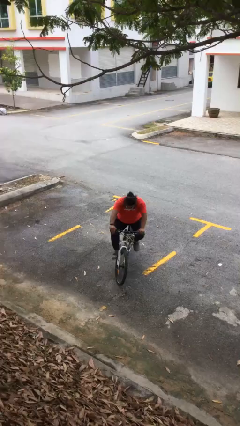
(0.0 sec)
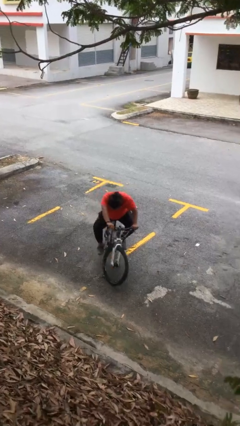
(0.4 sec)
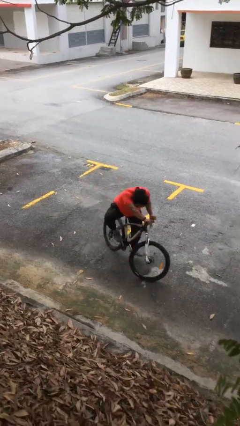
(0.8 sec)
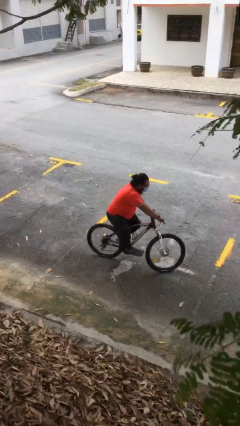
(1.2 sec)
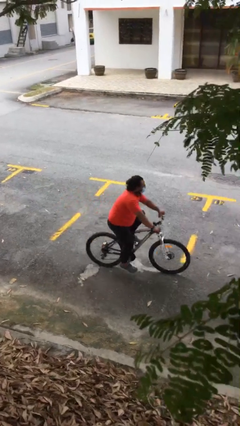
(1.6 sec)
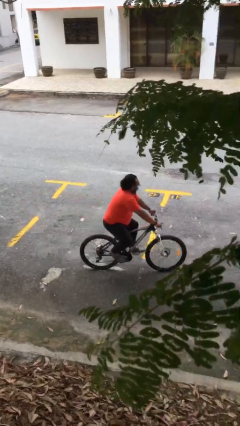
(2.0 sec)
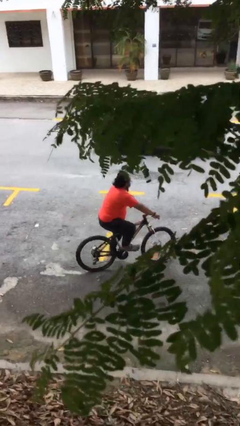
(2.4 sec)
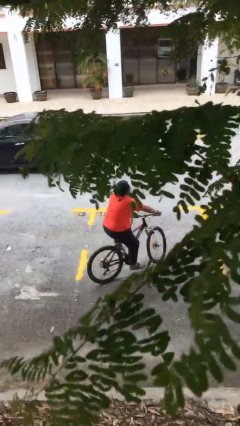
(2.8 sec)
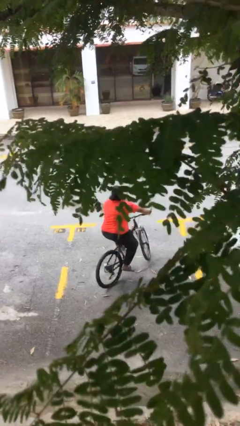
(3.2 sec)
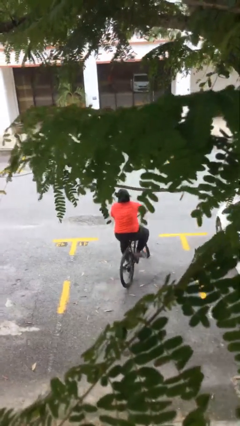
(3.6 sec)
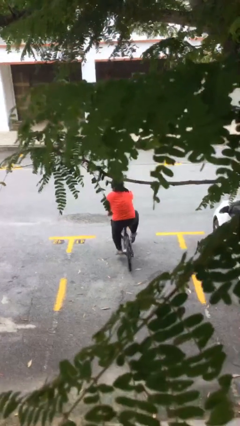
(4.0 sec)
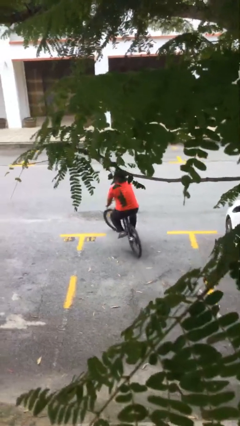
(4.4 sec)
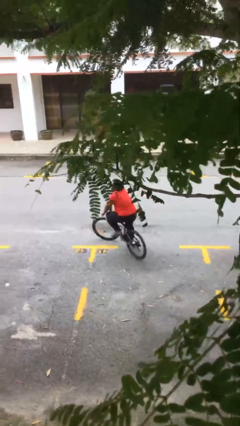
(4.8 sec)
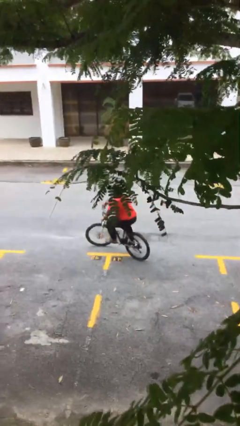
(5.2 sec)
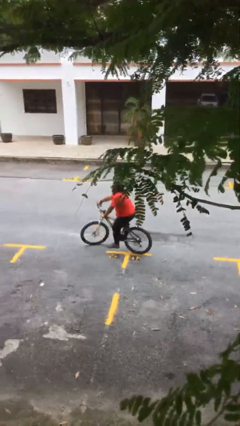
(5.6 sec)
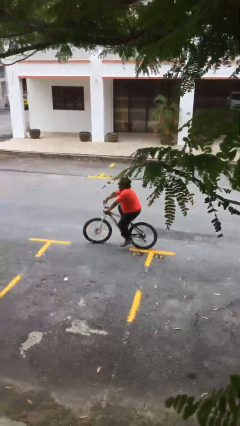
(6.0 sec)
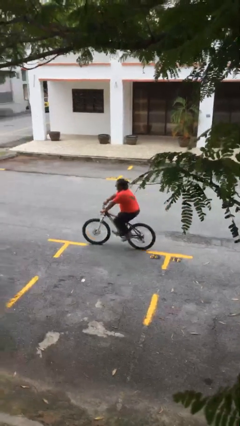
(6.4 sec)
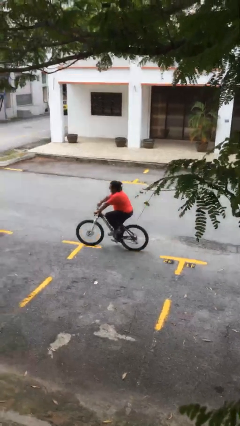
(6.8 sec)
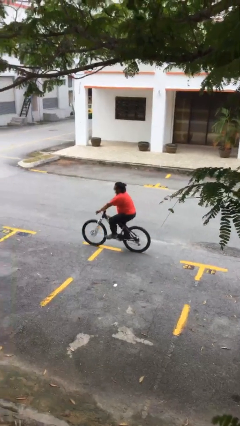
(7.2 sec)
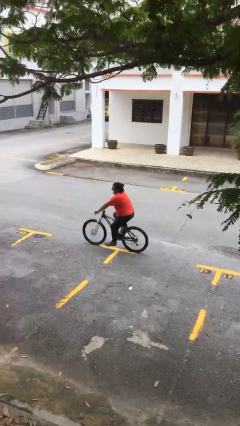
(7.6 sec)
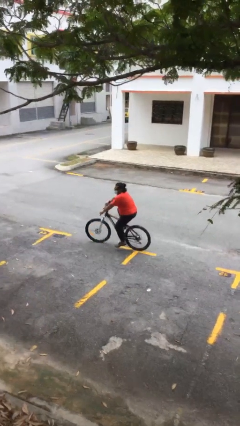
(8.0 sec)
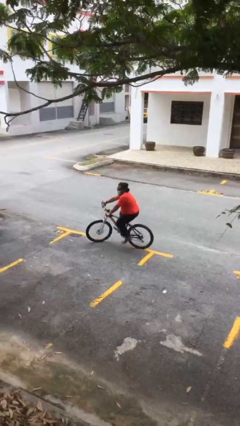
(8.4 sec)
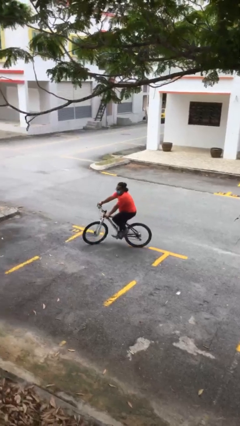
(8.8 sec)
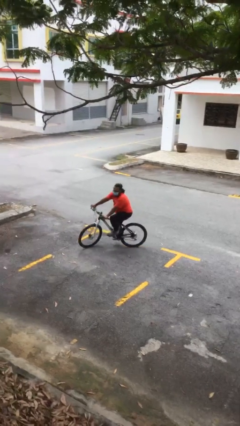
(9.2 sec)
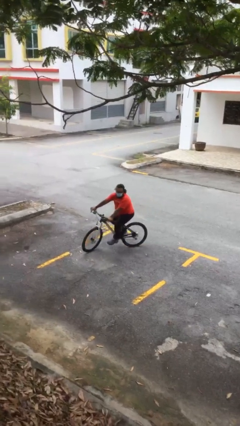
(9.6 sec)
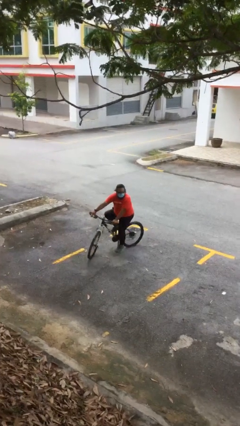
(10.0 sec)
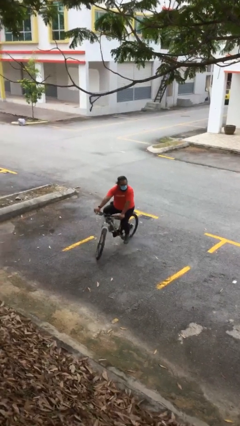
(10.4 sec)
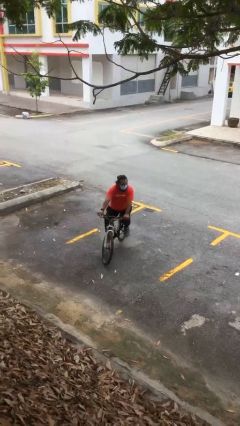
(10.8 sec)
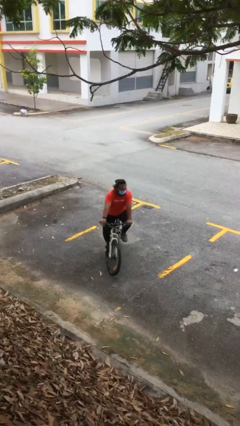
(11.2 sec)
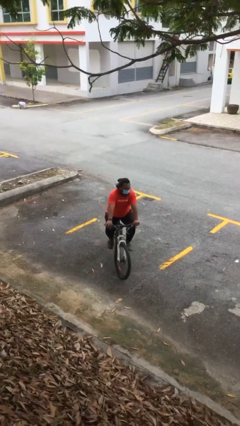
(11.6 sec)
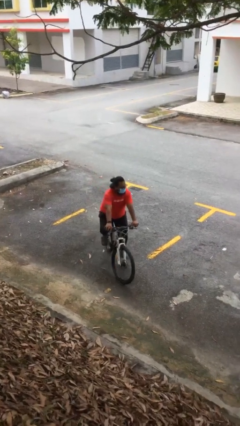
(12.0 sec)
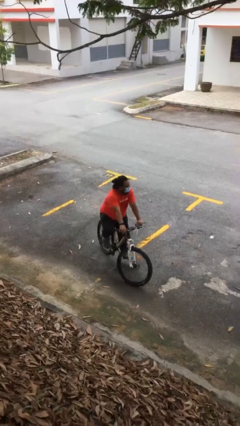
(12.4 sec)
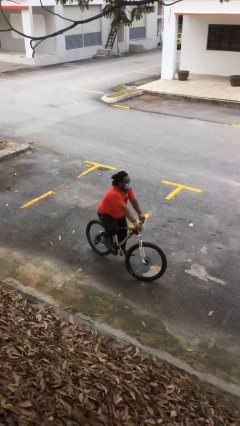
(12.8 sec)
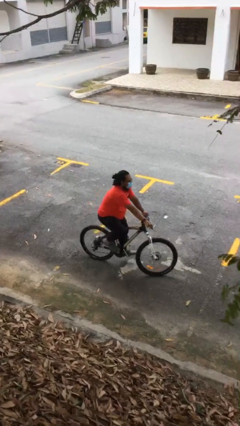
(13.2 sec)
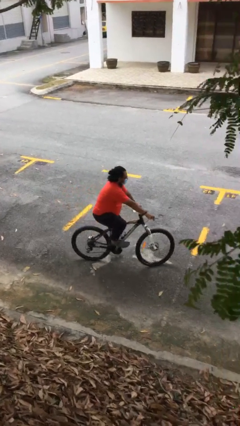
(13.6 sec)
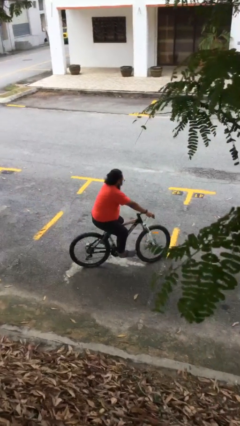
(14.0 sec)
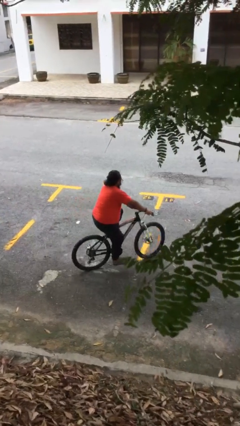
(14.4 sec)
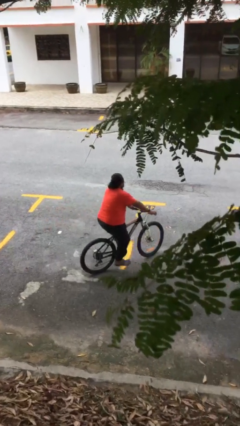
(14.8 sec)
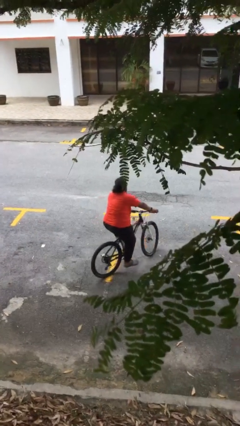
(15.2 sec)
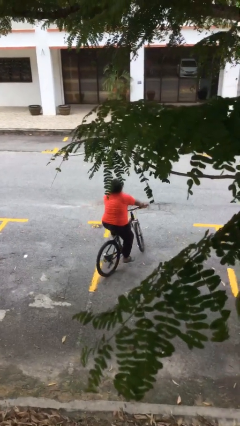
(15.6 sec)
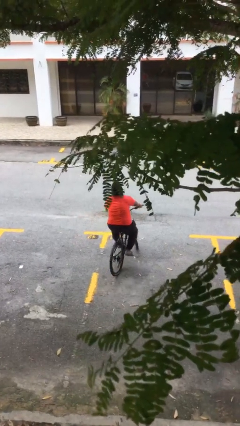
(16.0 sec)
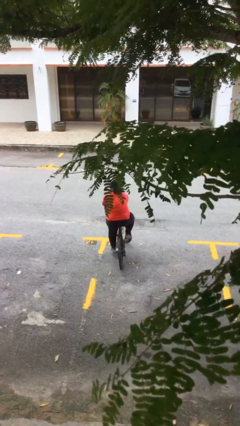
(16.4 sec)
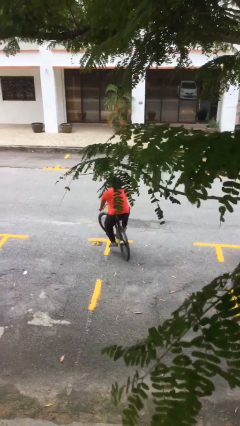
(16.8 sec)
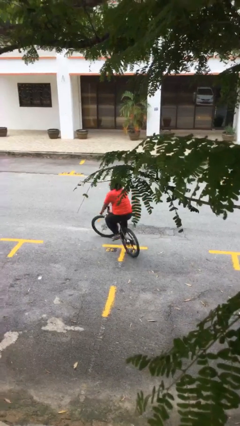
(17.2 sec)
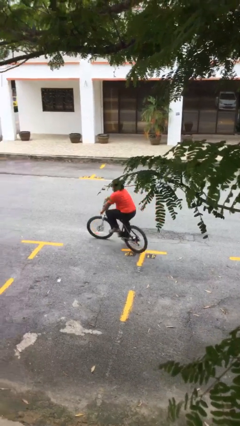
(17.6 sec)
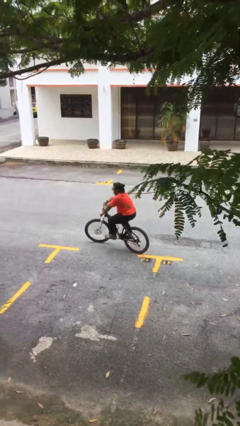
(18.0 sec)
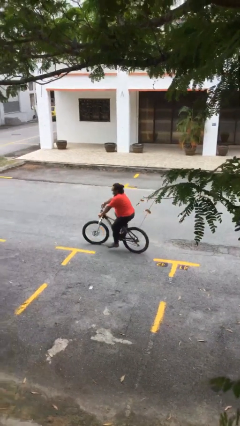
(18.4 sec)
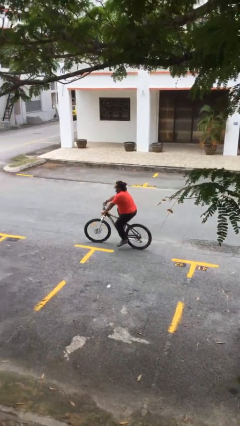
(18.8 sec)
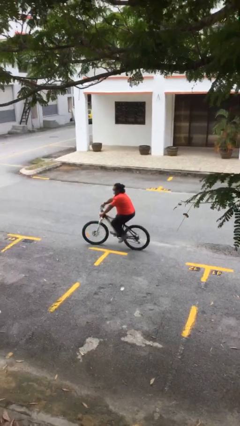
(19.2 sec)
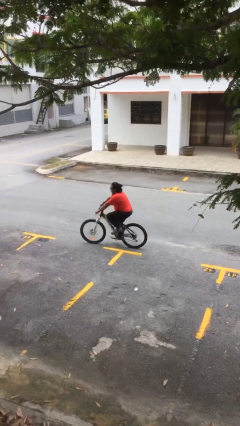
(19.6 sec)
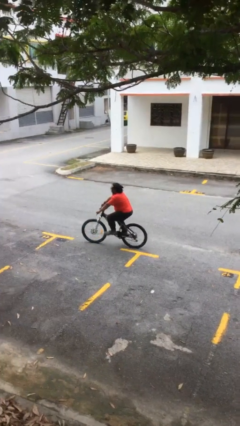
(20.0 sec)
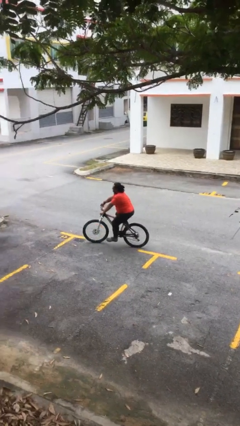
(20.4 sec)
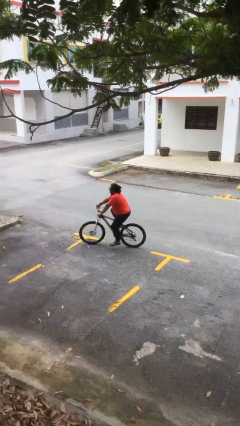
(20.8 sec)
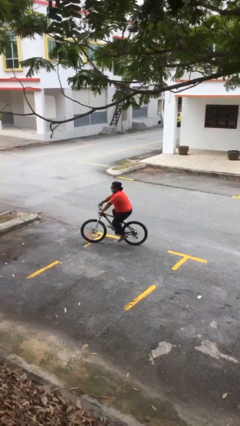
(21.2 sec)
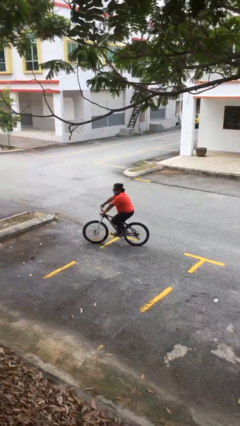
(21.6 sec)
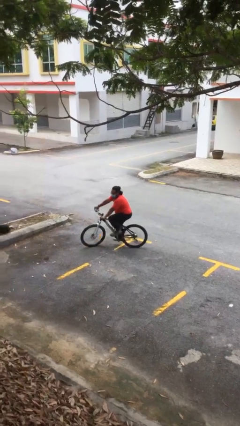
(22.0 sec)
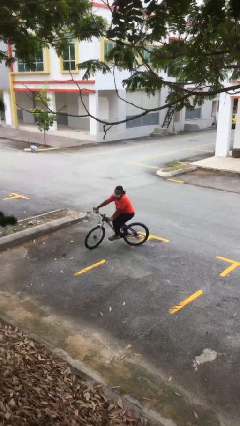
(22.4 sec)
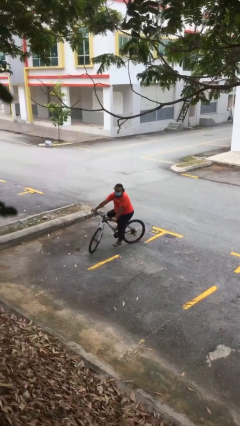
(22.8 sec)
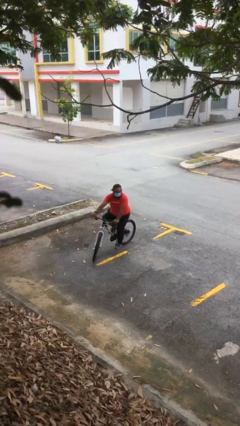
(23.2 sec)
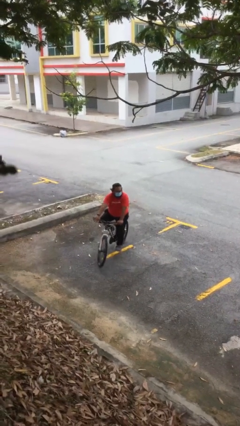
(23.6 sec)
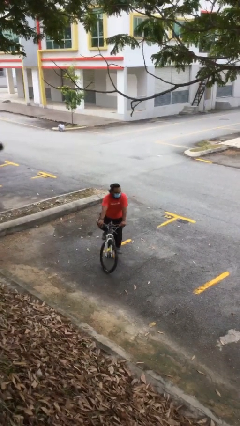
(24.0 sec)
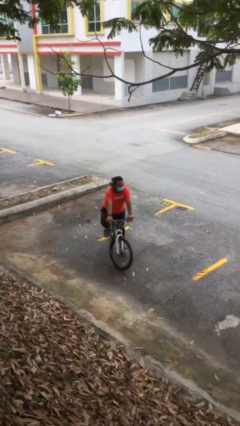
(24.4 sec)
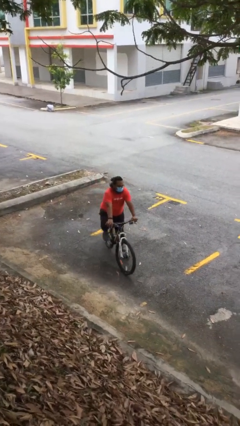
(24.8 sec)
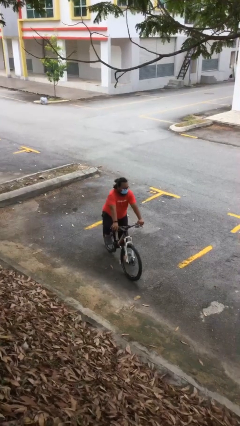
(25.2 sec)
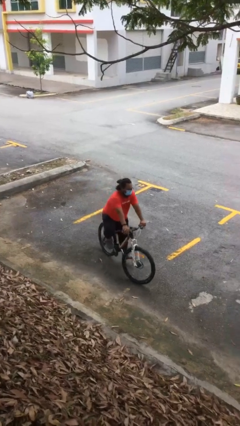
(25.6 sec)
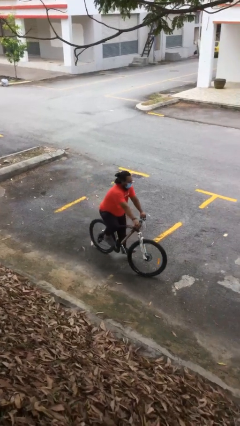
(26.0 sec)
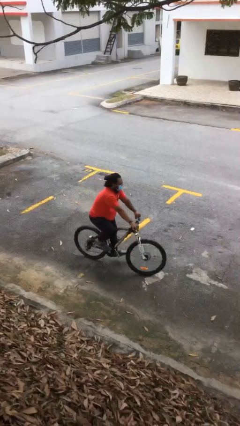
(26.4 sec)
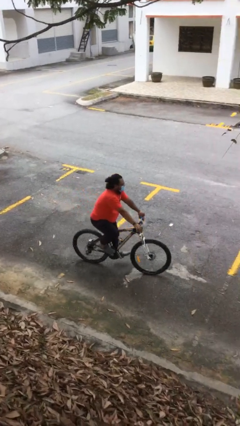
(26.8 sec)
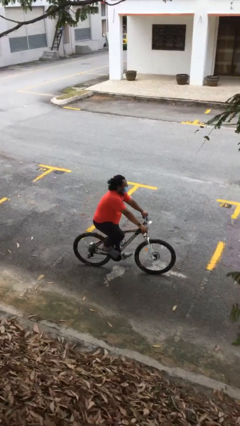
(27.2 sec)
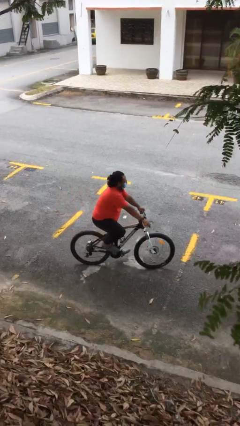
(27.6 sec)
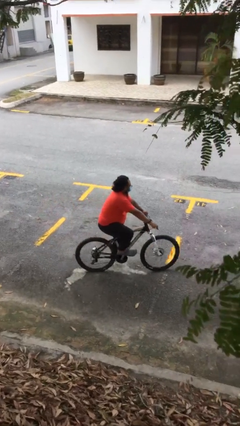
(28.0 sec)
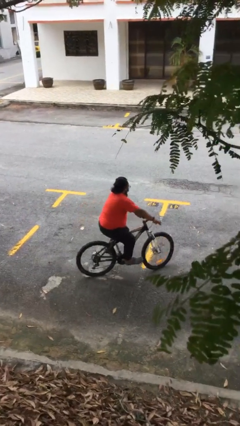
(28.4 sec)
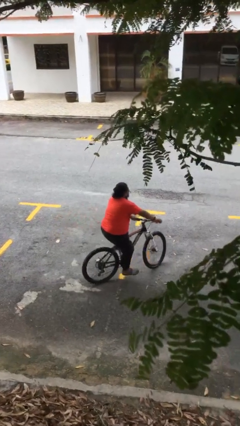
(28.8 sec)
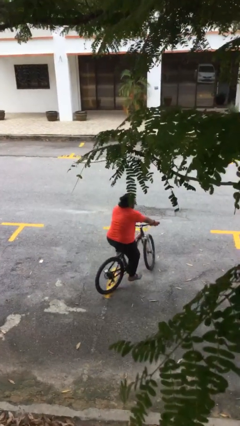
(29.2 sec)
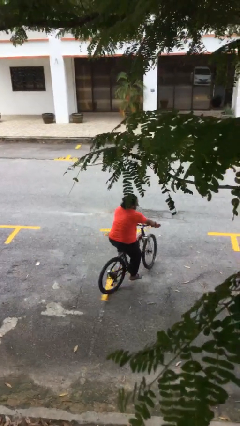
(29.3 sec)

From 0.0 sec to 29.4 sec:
person rides bicycle

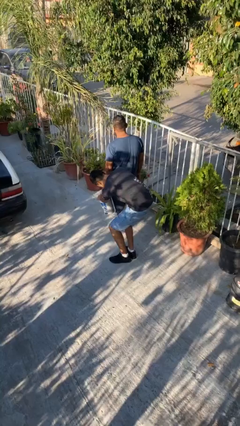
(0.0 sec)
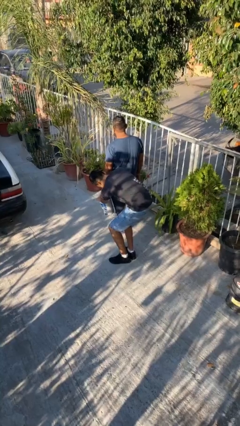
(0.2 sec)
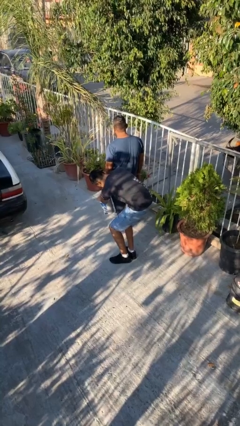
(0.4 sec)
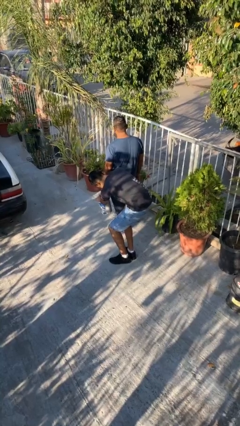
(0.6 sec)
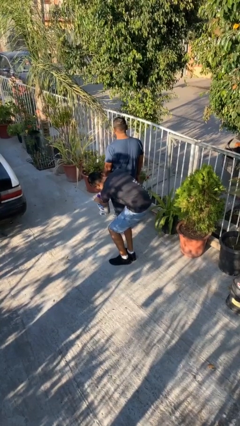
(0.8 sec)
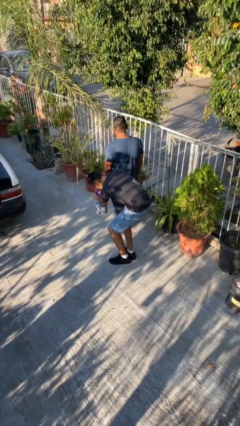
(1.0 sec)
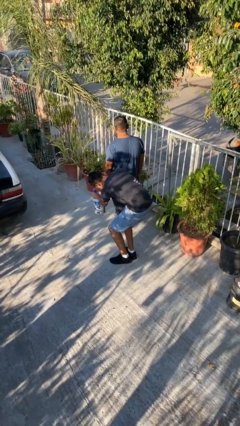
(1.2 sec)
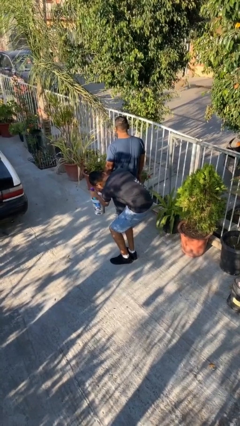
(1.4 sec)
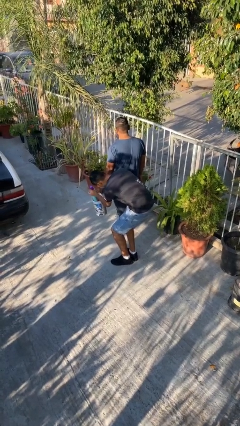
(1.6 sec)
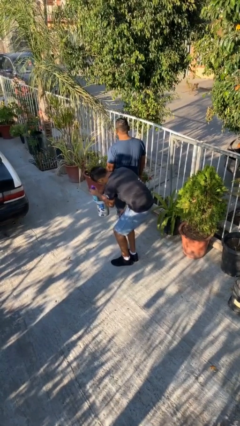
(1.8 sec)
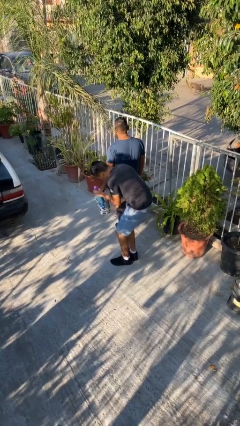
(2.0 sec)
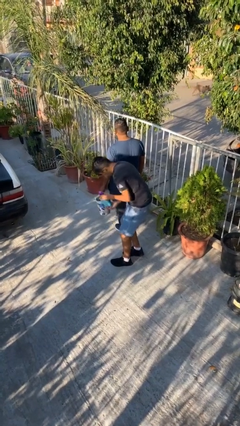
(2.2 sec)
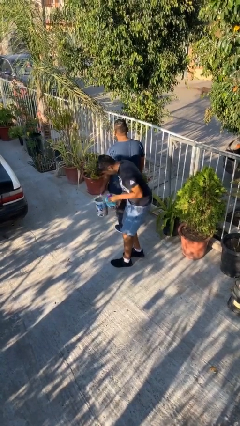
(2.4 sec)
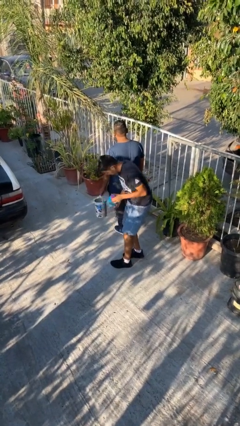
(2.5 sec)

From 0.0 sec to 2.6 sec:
person steals object from person

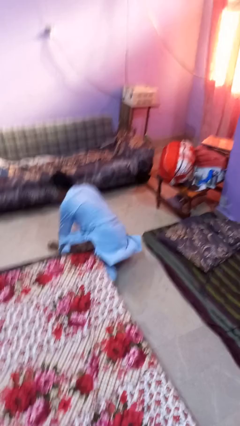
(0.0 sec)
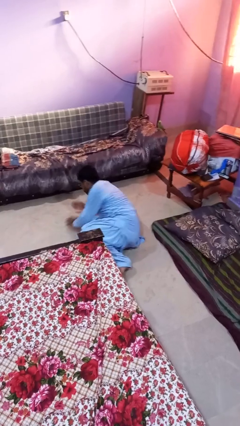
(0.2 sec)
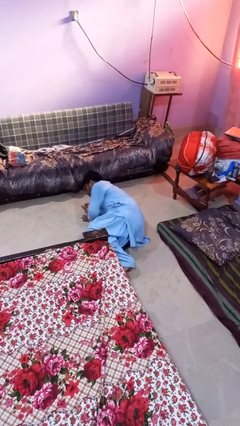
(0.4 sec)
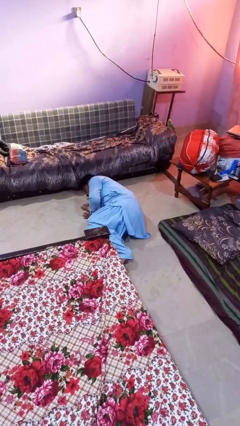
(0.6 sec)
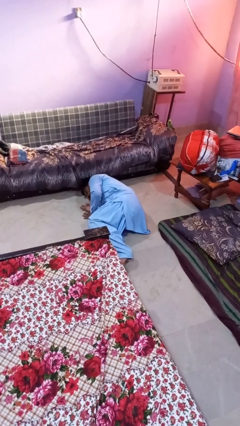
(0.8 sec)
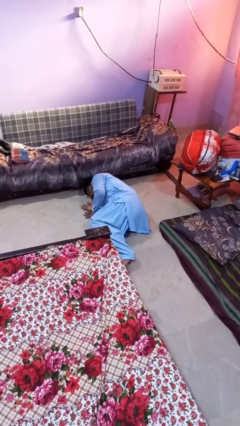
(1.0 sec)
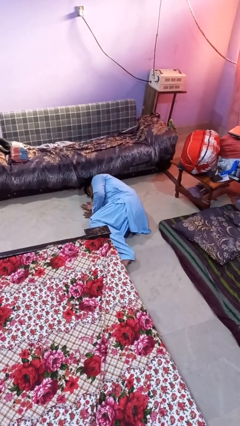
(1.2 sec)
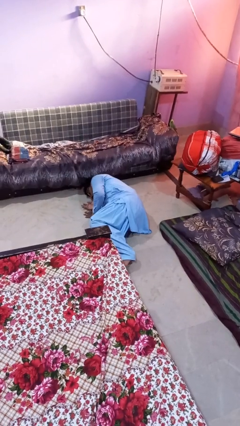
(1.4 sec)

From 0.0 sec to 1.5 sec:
person lies down on floor
